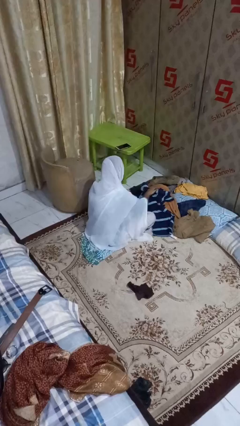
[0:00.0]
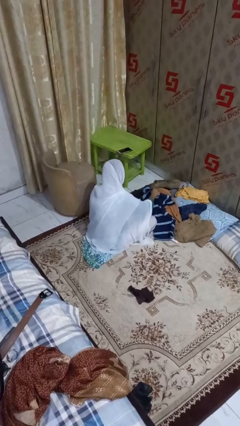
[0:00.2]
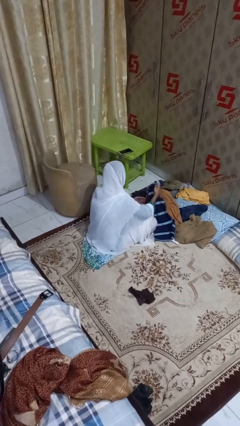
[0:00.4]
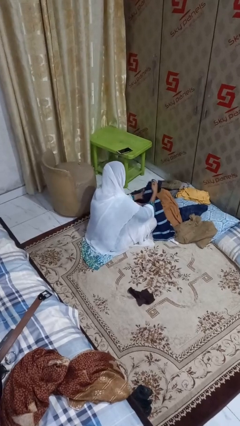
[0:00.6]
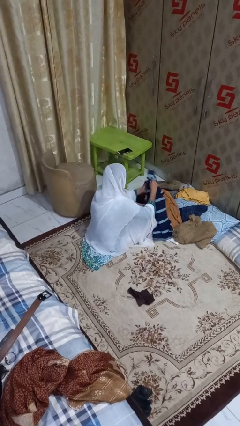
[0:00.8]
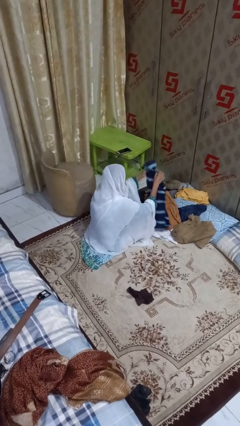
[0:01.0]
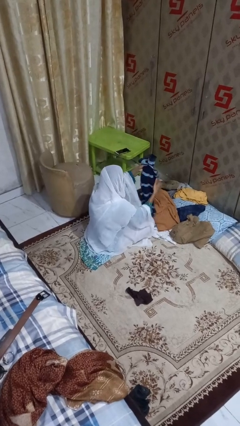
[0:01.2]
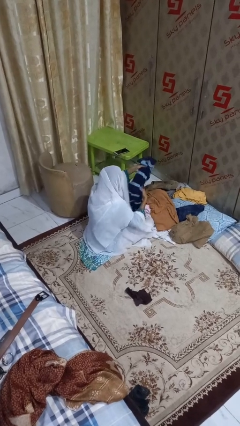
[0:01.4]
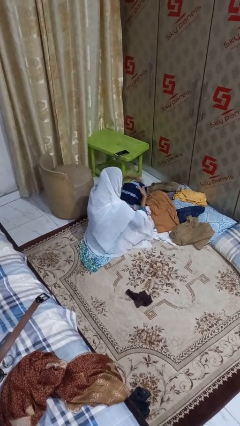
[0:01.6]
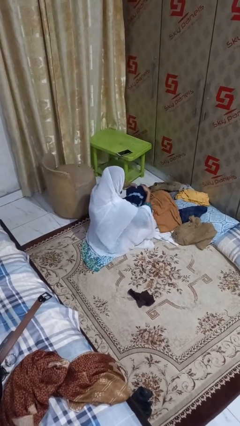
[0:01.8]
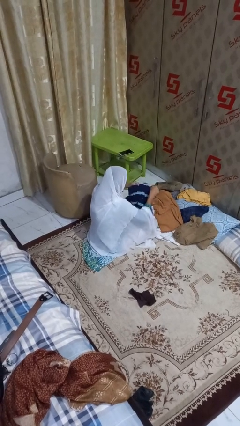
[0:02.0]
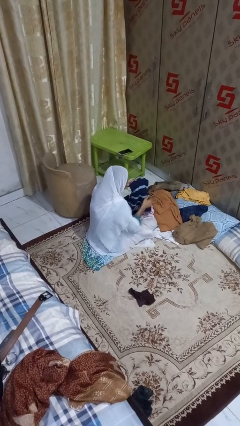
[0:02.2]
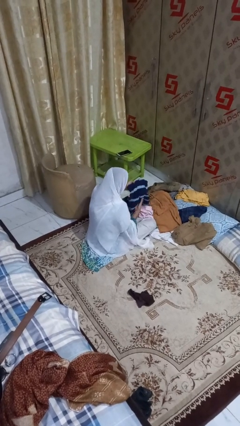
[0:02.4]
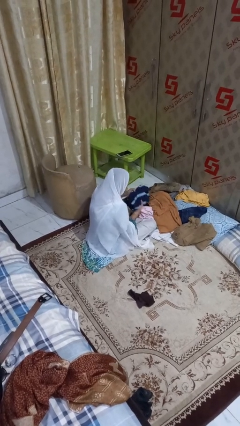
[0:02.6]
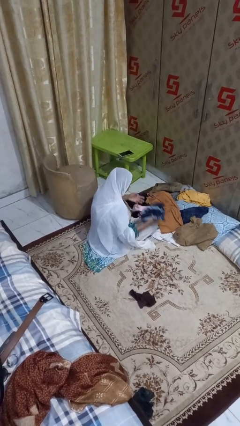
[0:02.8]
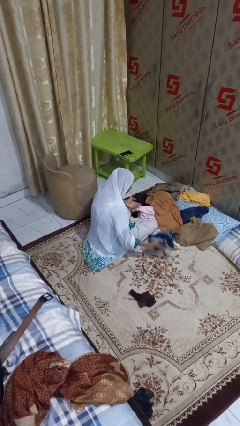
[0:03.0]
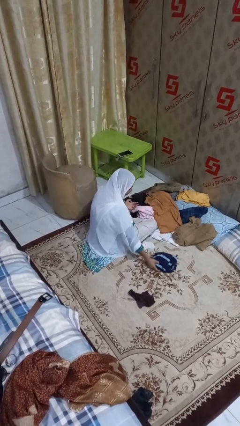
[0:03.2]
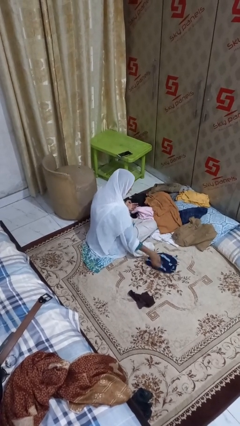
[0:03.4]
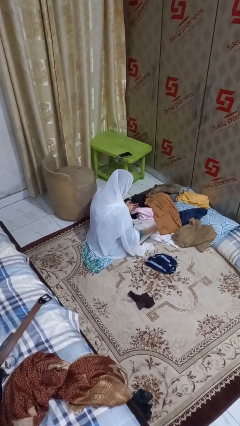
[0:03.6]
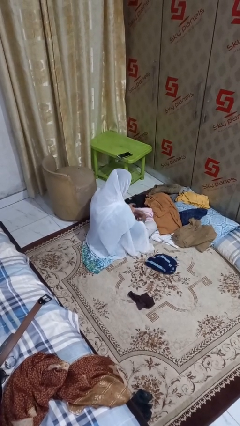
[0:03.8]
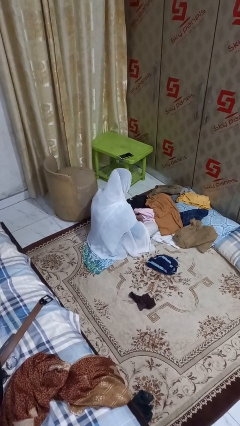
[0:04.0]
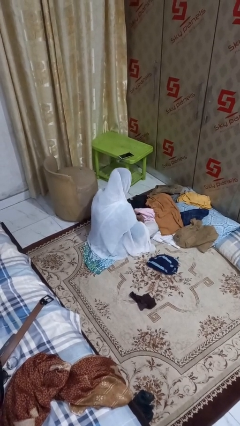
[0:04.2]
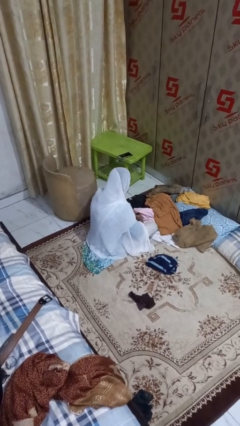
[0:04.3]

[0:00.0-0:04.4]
person folds shirt

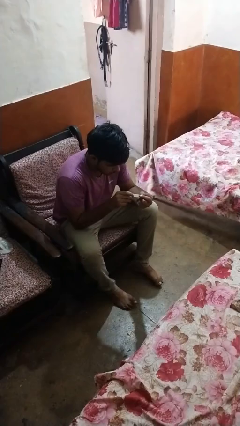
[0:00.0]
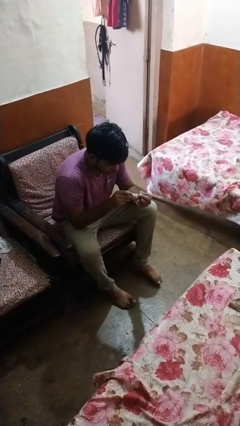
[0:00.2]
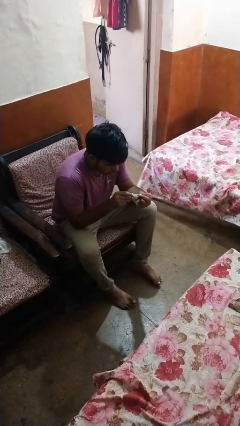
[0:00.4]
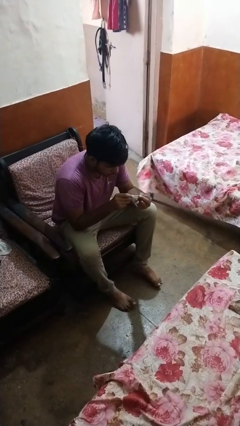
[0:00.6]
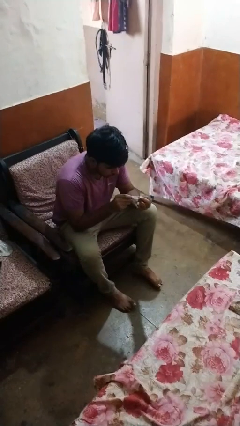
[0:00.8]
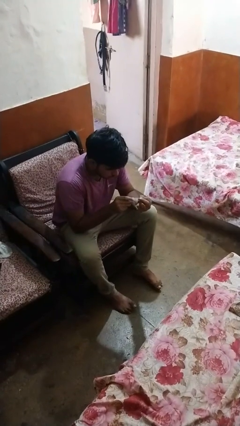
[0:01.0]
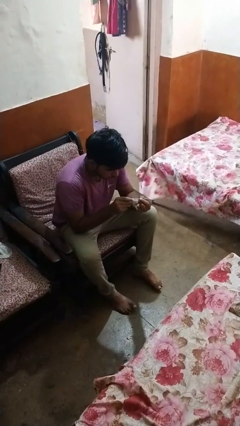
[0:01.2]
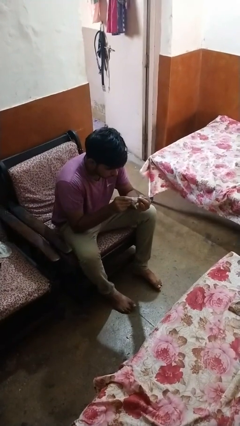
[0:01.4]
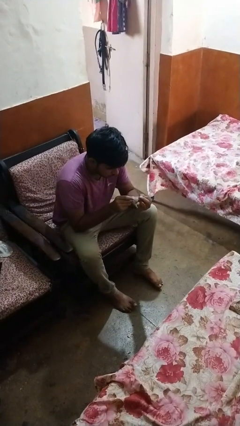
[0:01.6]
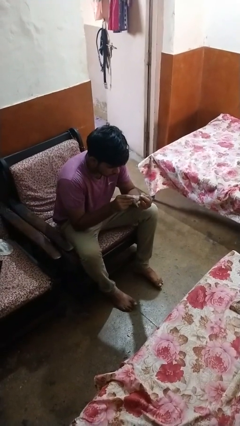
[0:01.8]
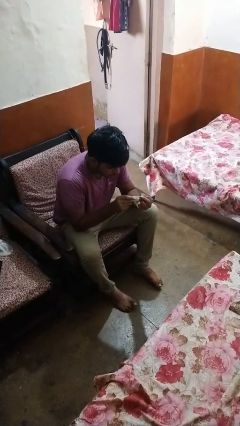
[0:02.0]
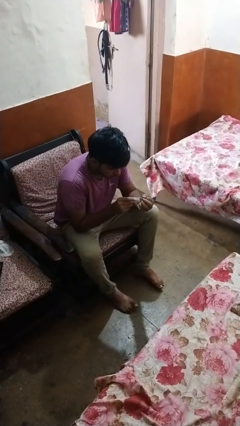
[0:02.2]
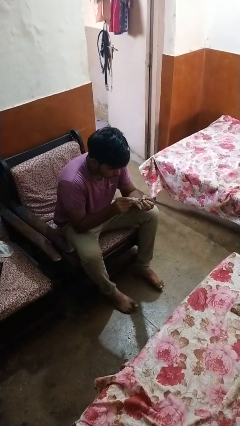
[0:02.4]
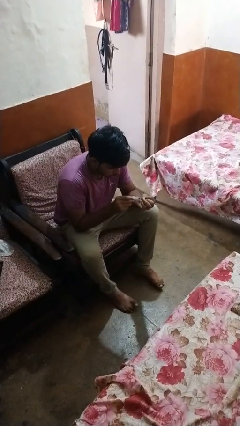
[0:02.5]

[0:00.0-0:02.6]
person clips fingernails

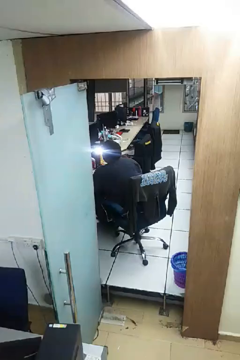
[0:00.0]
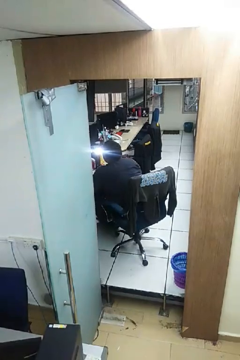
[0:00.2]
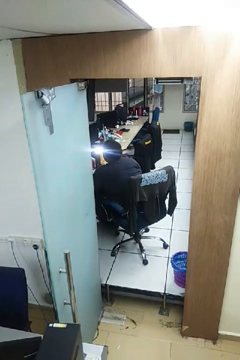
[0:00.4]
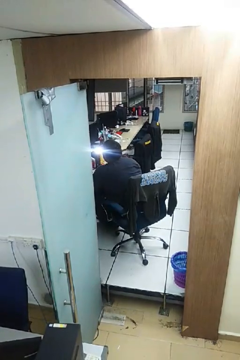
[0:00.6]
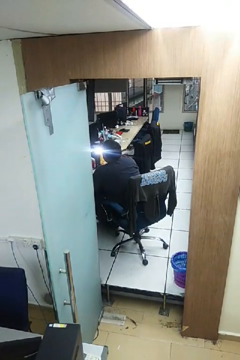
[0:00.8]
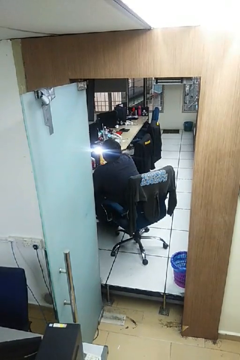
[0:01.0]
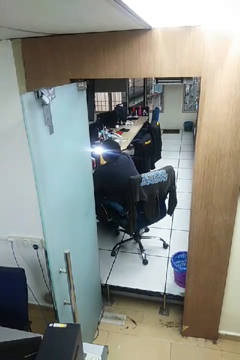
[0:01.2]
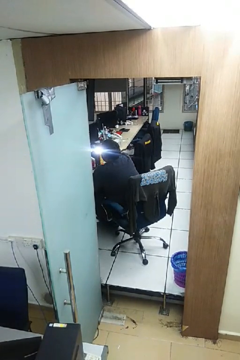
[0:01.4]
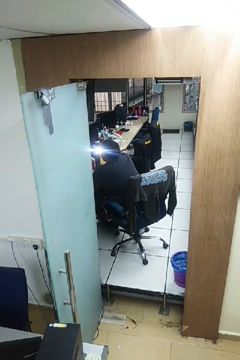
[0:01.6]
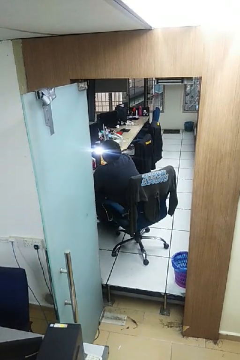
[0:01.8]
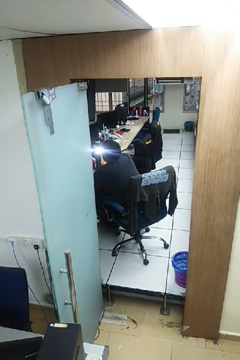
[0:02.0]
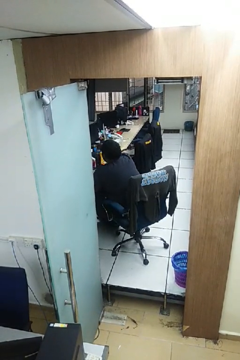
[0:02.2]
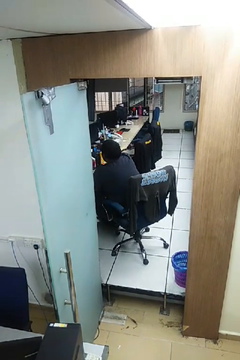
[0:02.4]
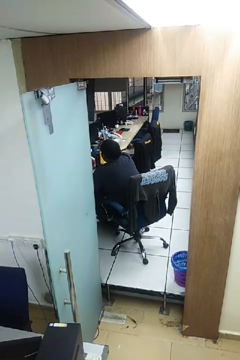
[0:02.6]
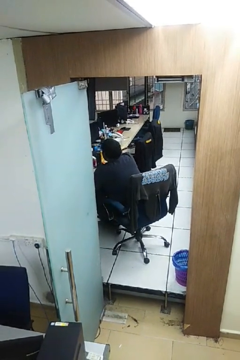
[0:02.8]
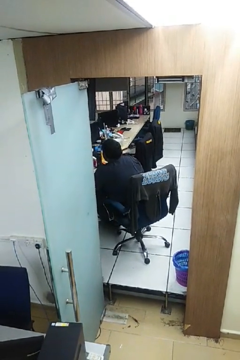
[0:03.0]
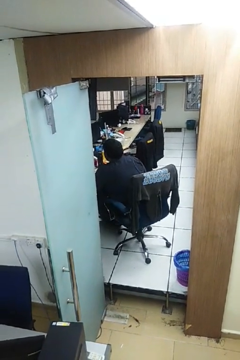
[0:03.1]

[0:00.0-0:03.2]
person turns off lamp

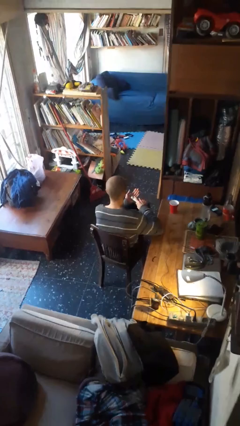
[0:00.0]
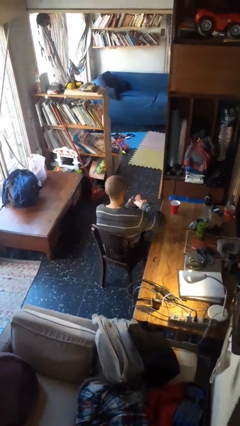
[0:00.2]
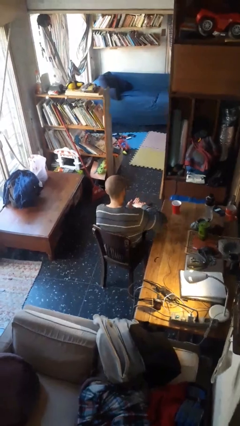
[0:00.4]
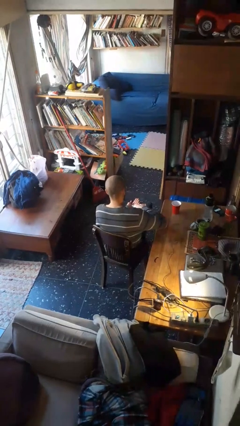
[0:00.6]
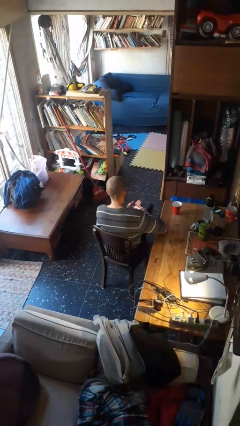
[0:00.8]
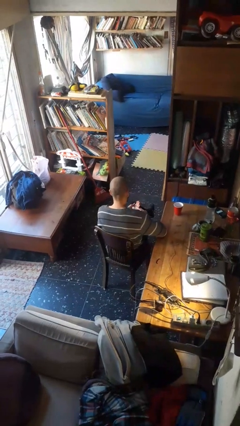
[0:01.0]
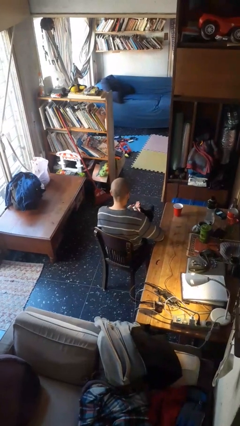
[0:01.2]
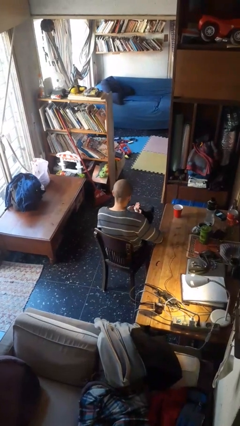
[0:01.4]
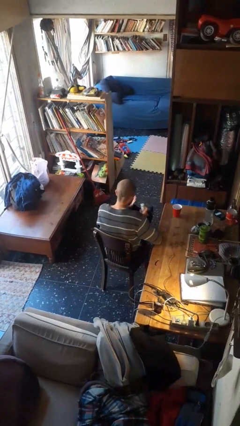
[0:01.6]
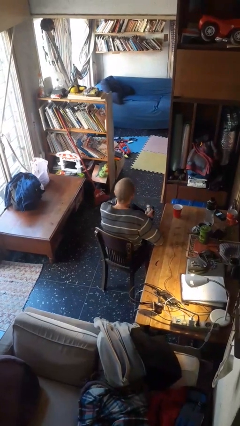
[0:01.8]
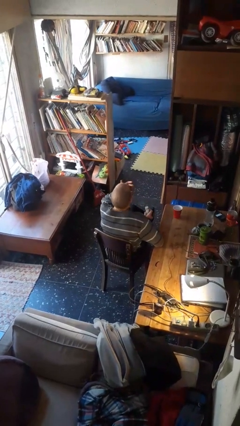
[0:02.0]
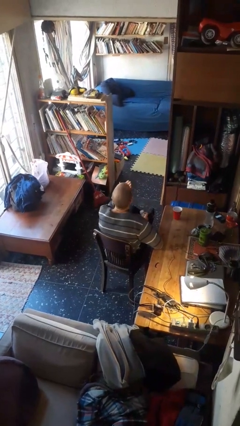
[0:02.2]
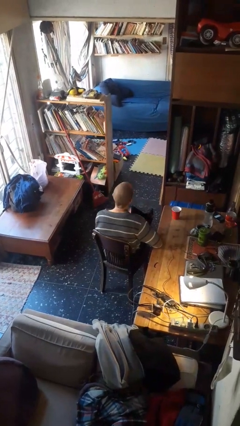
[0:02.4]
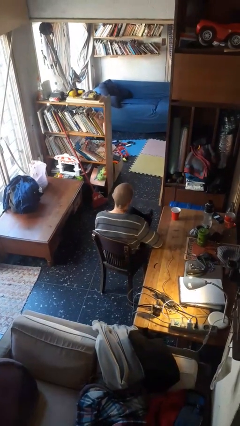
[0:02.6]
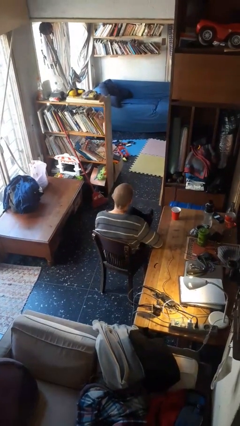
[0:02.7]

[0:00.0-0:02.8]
person takes medicine pills

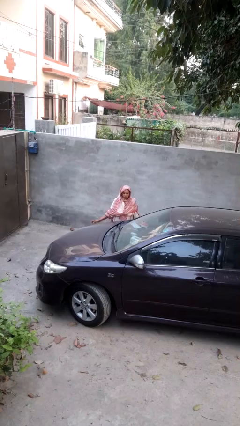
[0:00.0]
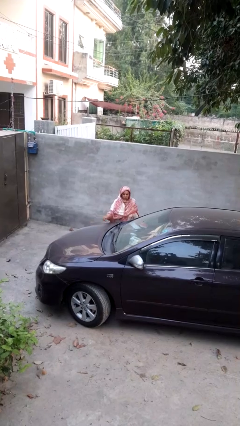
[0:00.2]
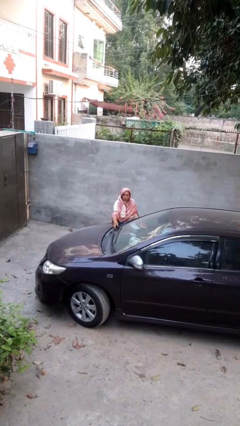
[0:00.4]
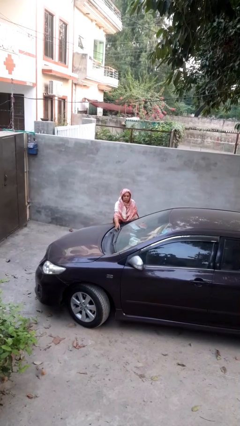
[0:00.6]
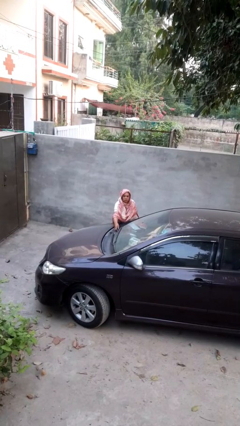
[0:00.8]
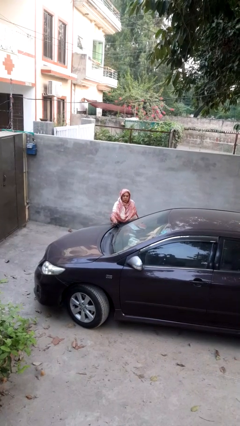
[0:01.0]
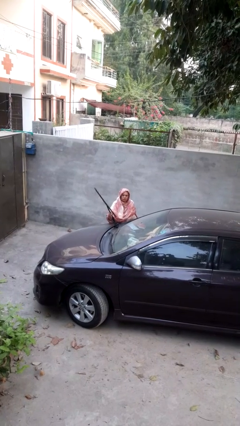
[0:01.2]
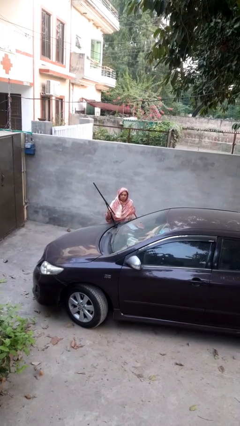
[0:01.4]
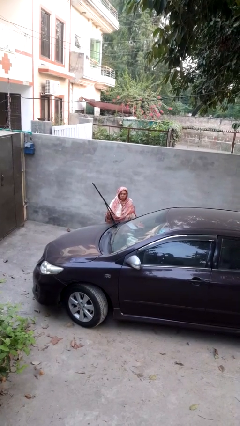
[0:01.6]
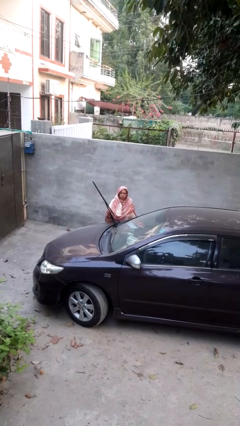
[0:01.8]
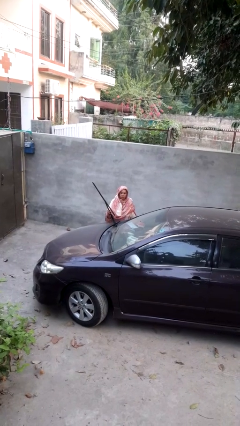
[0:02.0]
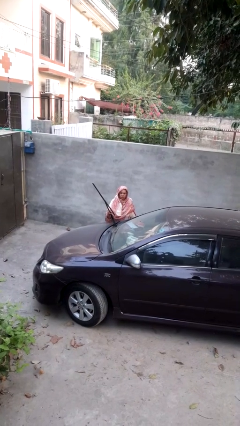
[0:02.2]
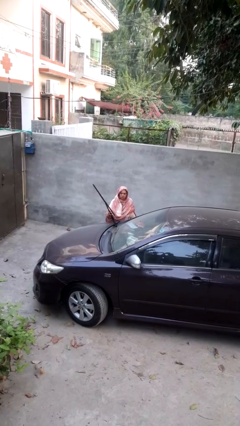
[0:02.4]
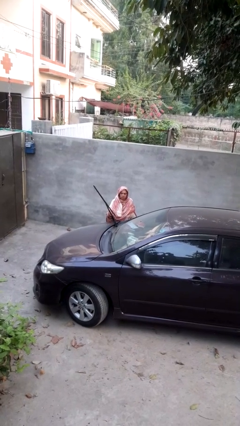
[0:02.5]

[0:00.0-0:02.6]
person flips up car wipers

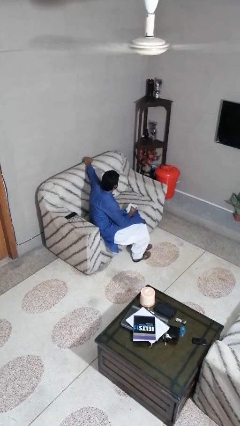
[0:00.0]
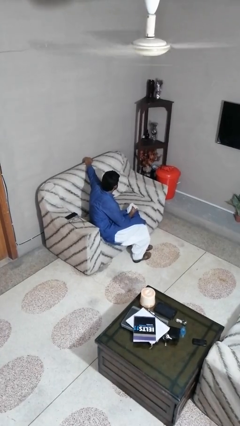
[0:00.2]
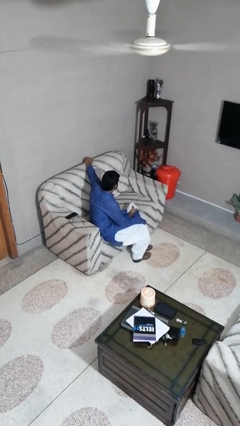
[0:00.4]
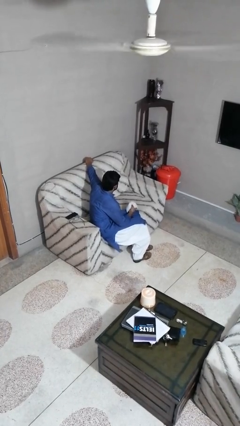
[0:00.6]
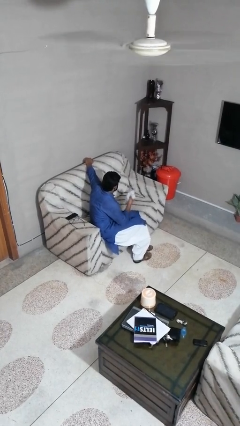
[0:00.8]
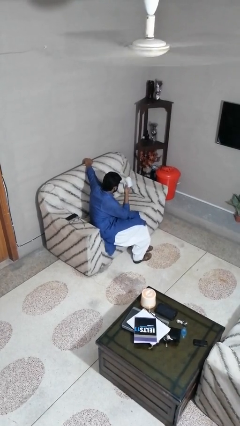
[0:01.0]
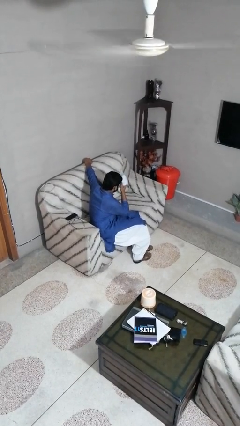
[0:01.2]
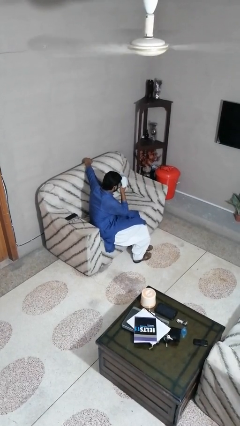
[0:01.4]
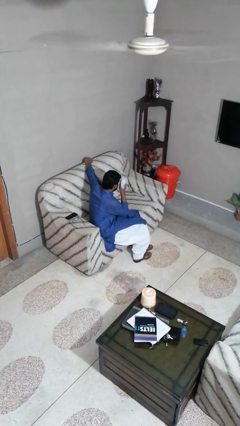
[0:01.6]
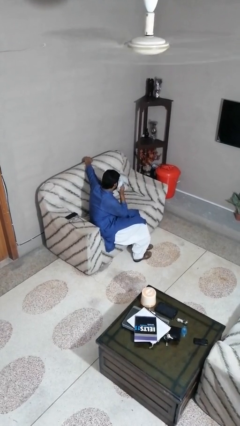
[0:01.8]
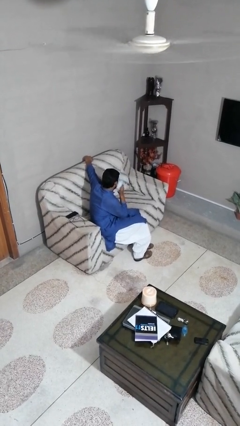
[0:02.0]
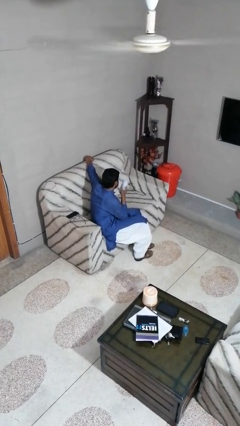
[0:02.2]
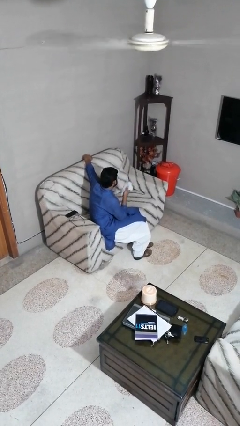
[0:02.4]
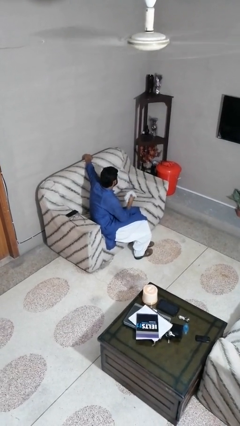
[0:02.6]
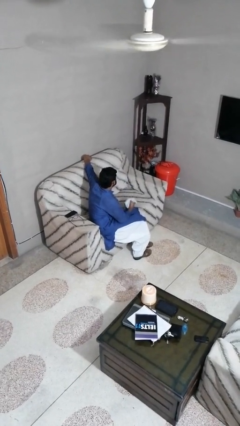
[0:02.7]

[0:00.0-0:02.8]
person wipes mouth with napkin
